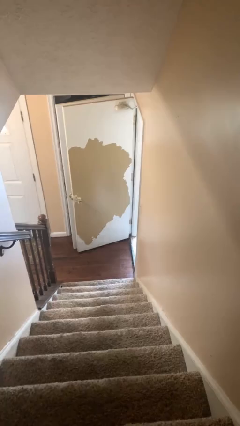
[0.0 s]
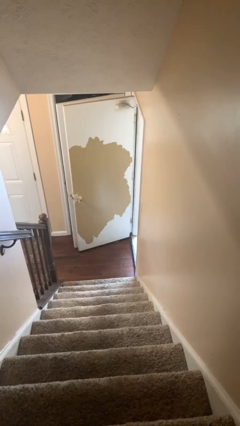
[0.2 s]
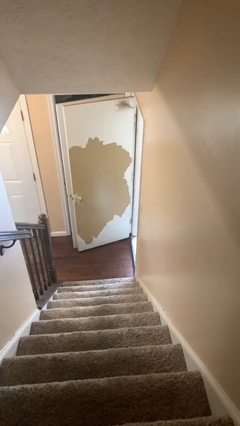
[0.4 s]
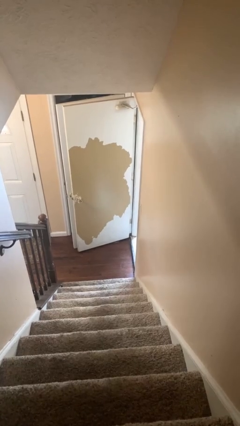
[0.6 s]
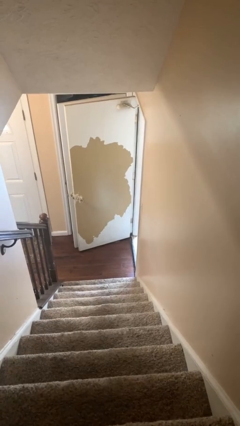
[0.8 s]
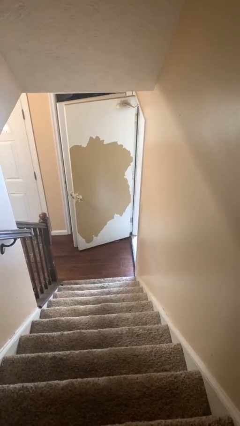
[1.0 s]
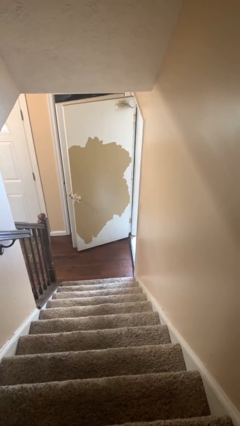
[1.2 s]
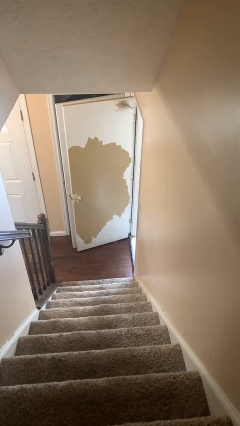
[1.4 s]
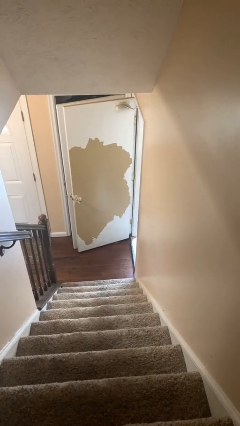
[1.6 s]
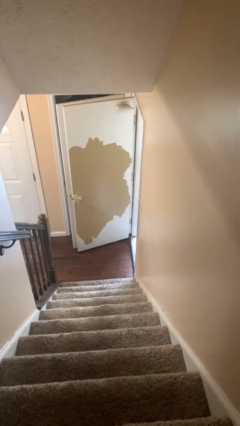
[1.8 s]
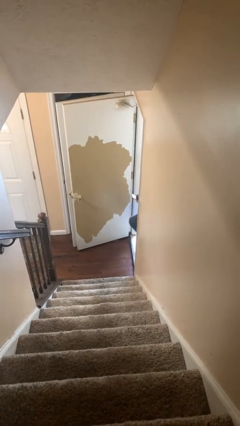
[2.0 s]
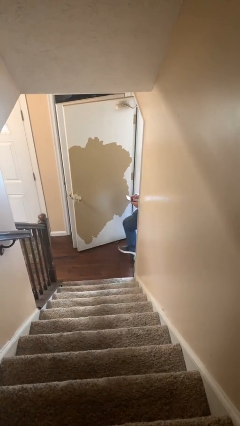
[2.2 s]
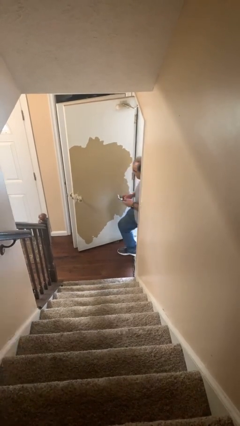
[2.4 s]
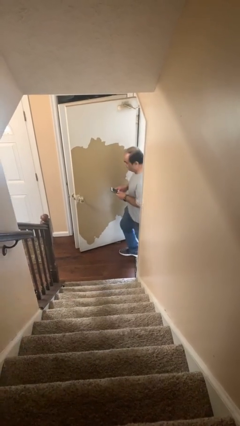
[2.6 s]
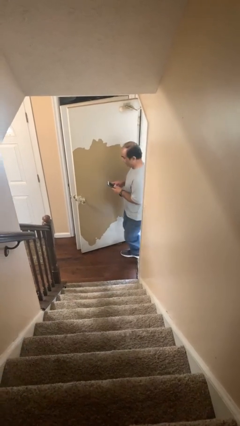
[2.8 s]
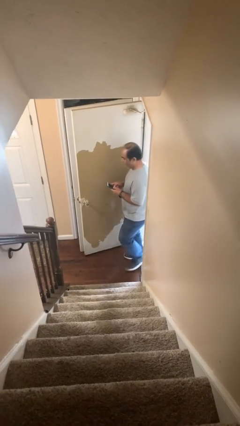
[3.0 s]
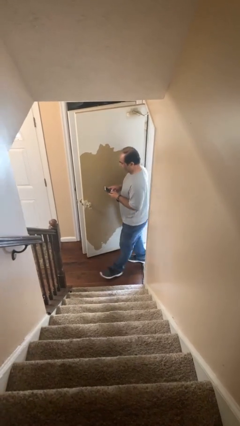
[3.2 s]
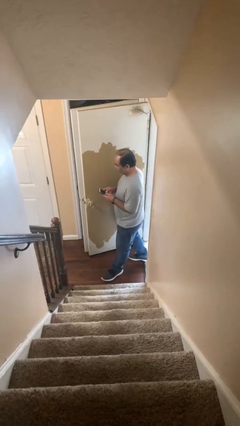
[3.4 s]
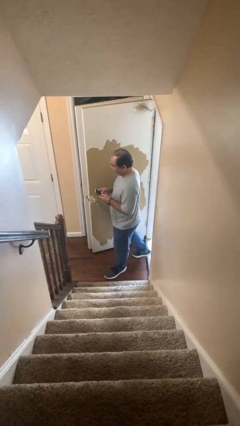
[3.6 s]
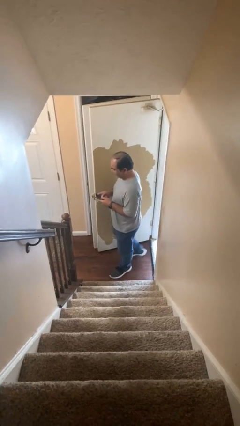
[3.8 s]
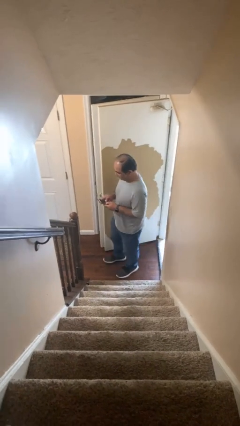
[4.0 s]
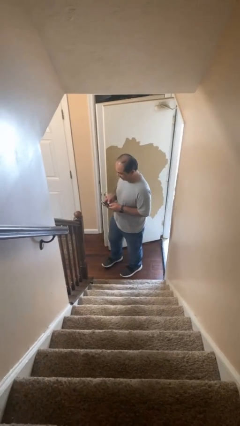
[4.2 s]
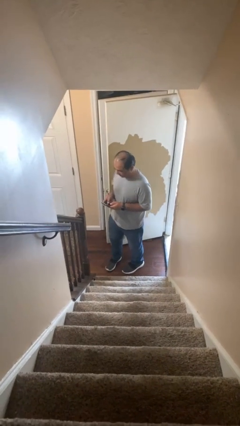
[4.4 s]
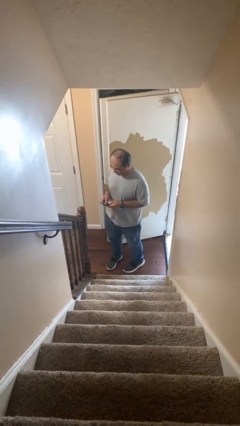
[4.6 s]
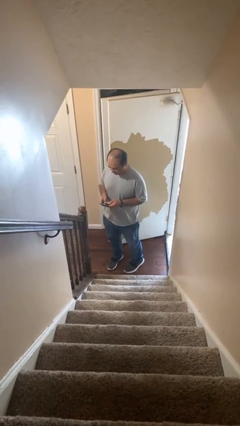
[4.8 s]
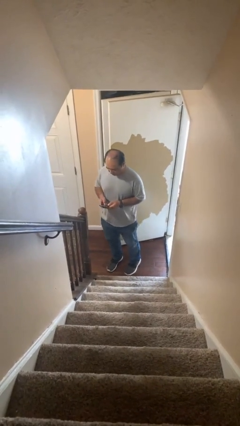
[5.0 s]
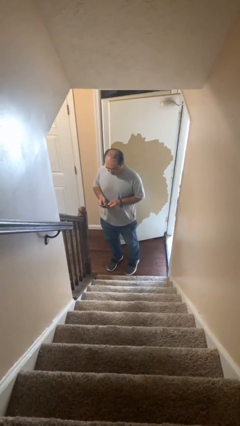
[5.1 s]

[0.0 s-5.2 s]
person enters scene through structure

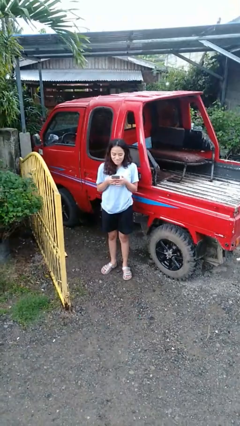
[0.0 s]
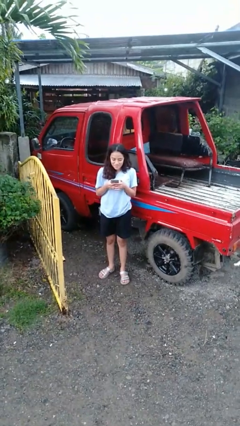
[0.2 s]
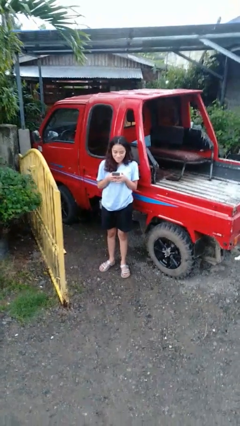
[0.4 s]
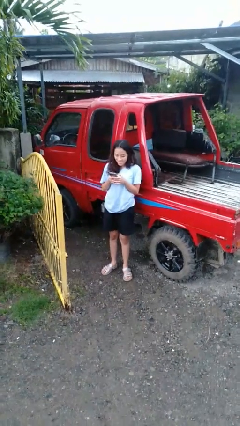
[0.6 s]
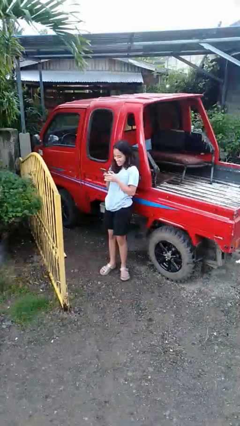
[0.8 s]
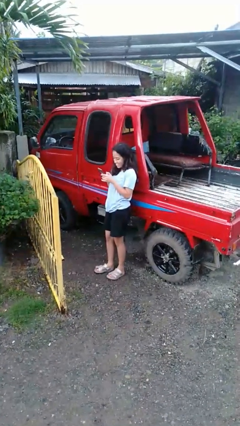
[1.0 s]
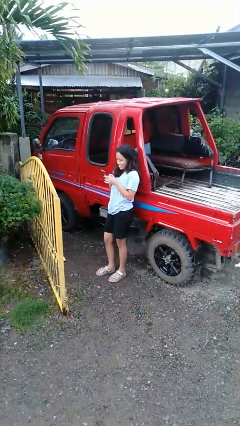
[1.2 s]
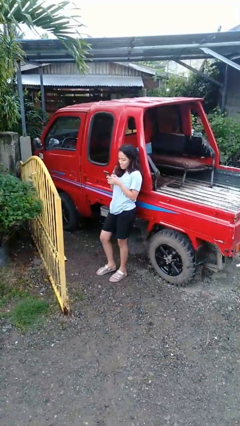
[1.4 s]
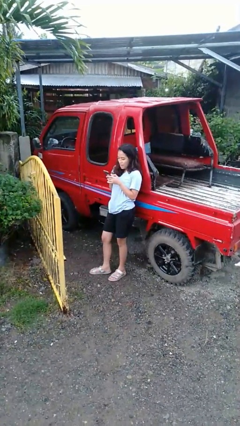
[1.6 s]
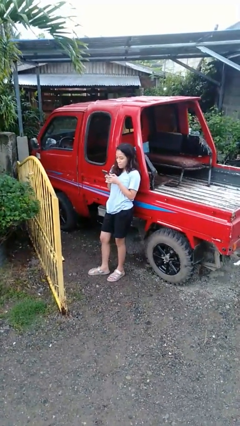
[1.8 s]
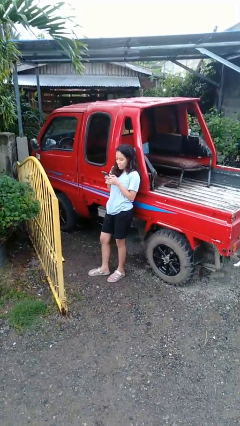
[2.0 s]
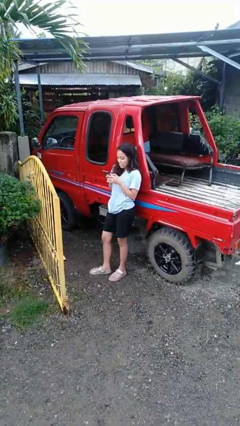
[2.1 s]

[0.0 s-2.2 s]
person leans against car

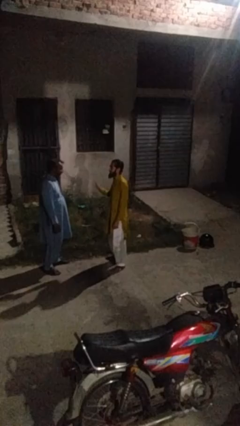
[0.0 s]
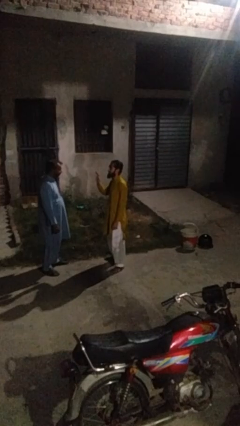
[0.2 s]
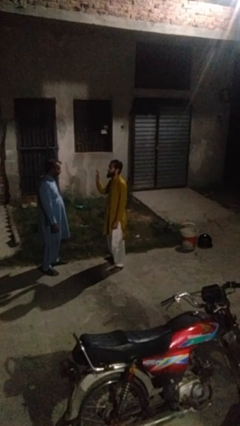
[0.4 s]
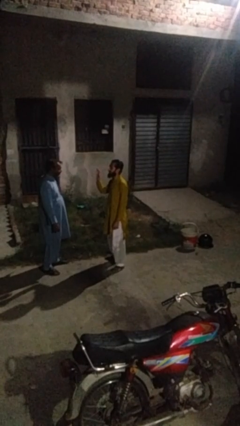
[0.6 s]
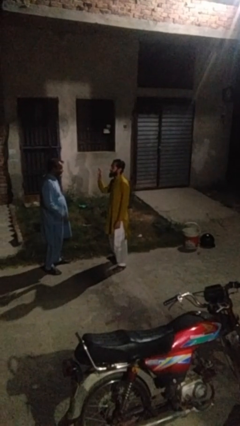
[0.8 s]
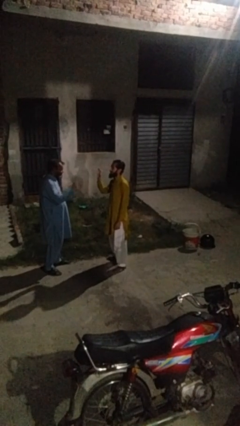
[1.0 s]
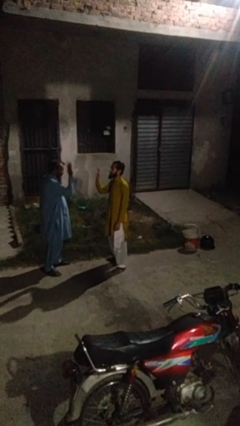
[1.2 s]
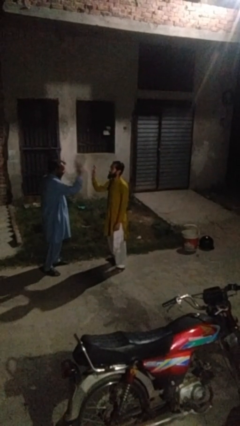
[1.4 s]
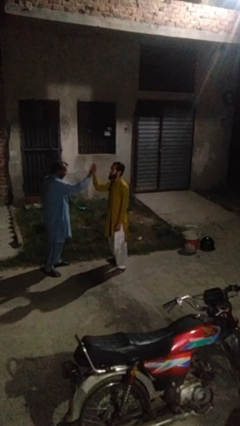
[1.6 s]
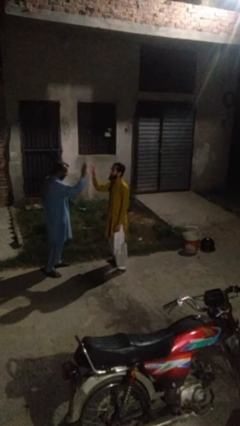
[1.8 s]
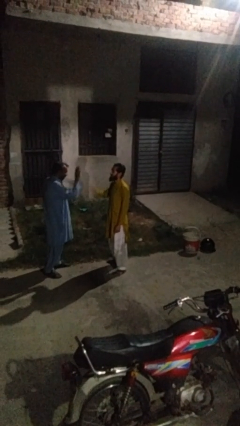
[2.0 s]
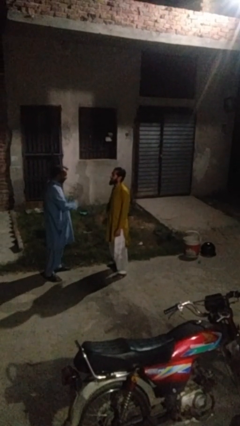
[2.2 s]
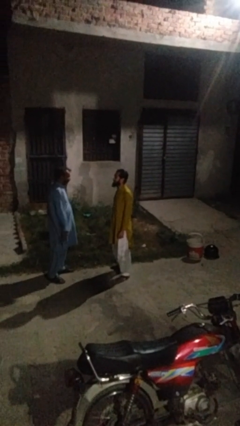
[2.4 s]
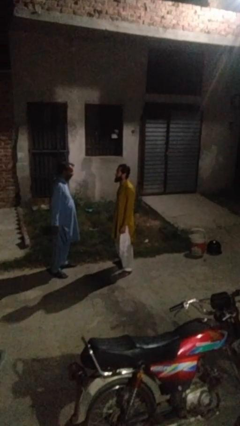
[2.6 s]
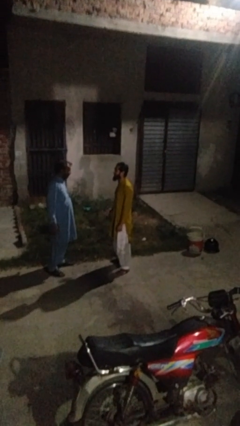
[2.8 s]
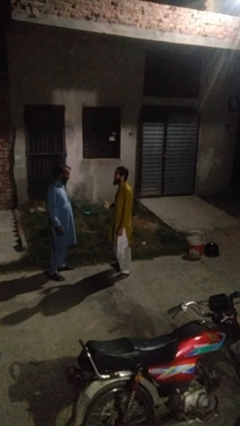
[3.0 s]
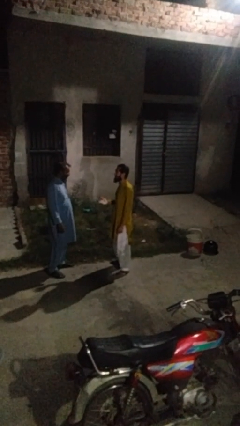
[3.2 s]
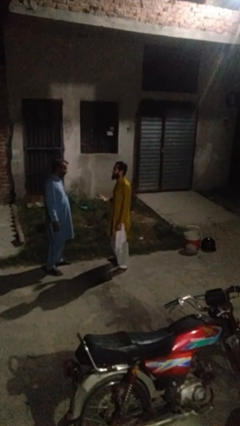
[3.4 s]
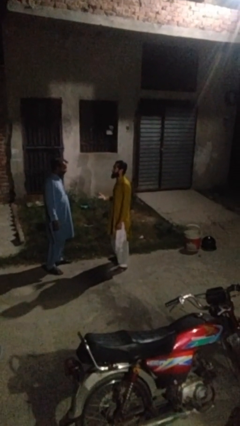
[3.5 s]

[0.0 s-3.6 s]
person highfives hand

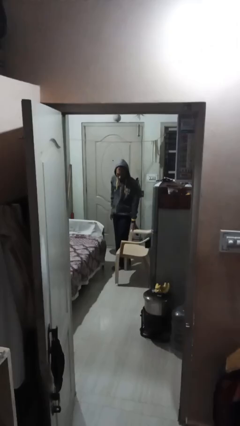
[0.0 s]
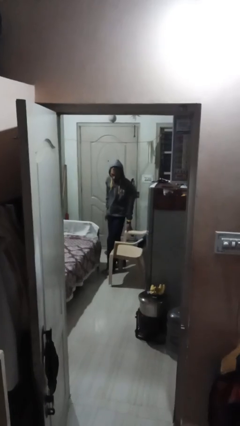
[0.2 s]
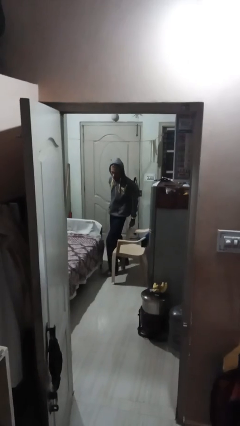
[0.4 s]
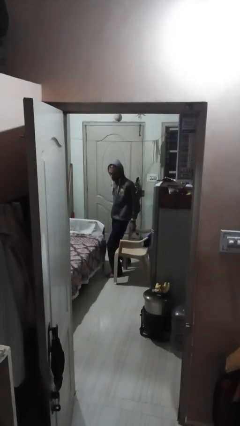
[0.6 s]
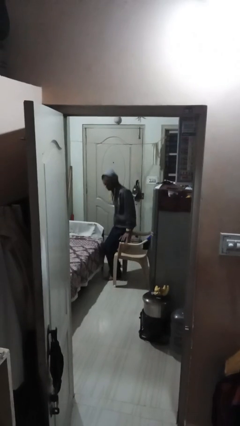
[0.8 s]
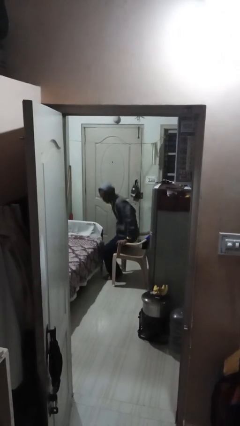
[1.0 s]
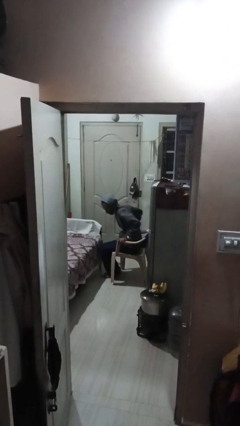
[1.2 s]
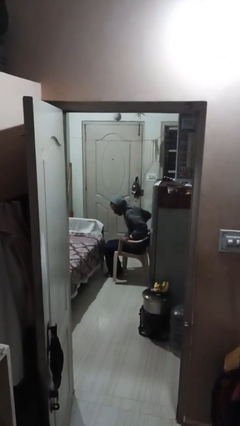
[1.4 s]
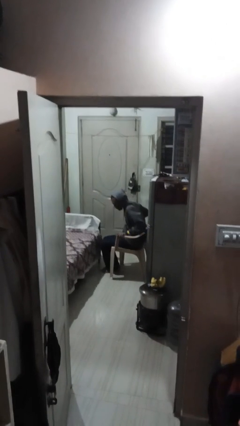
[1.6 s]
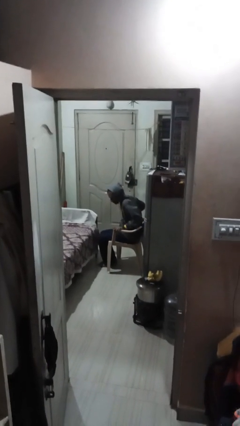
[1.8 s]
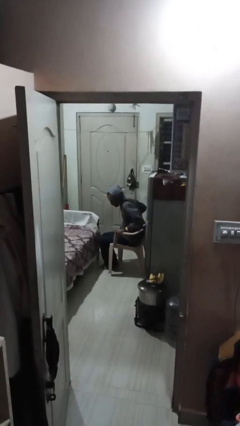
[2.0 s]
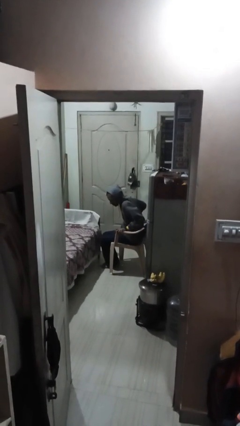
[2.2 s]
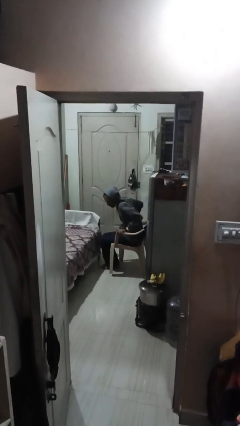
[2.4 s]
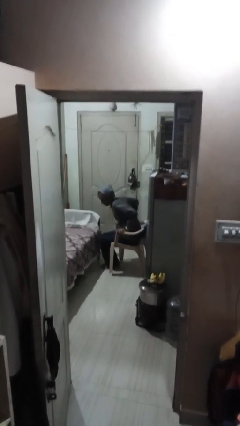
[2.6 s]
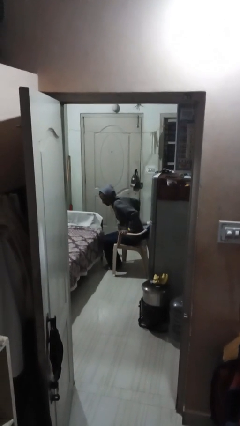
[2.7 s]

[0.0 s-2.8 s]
person sits down

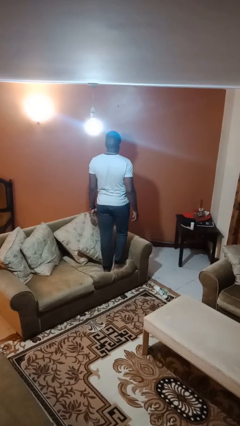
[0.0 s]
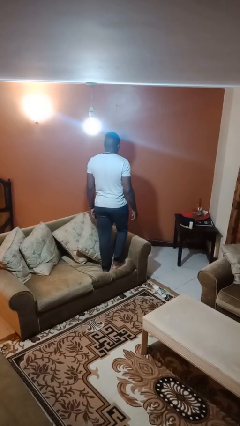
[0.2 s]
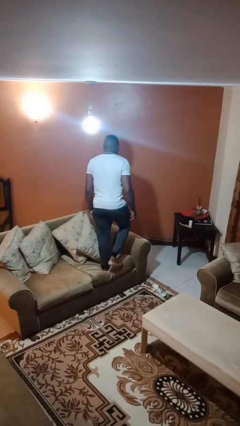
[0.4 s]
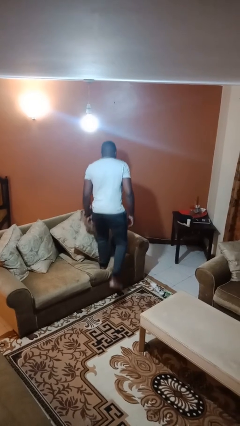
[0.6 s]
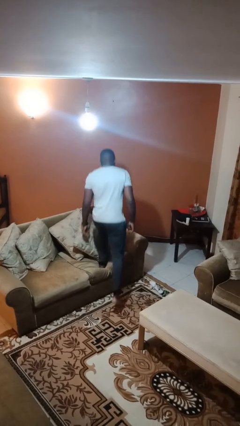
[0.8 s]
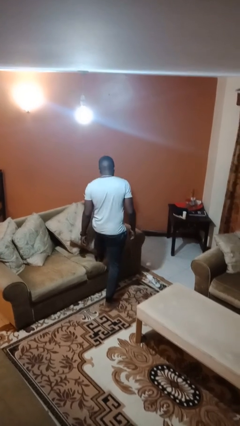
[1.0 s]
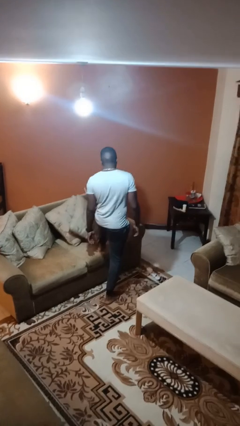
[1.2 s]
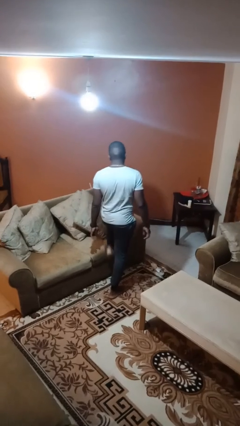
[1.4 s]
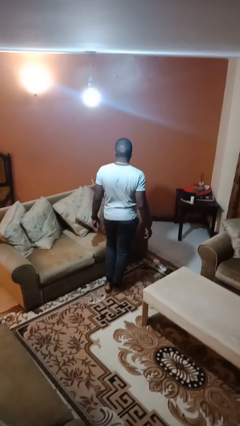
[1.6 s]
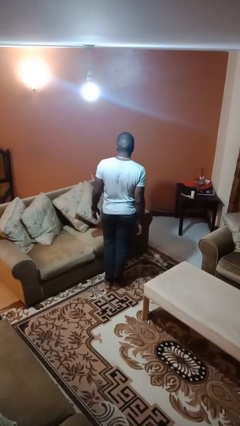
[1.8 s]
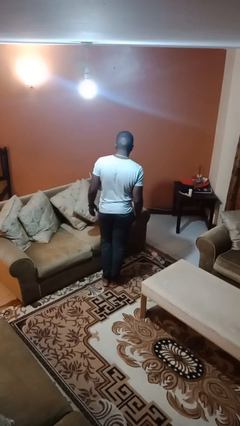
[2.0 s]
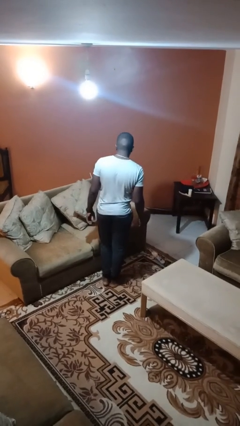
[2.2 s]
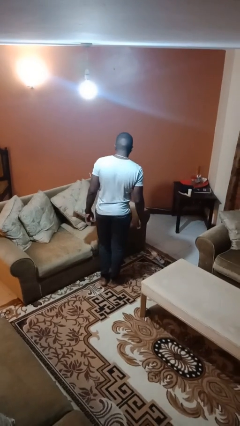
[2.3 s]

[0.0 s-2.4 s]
person climbs off couch

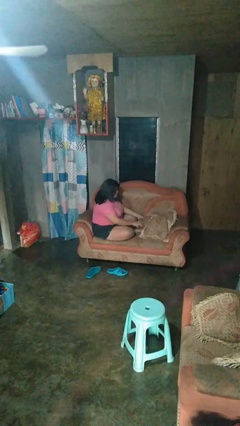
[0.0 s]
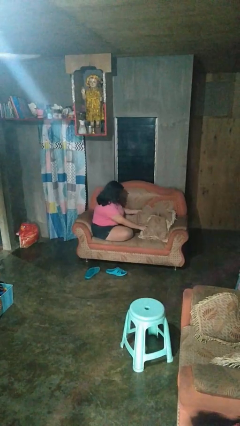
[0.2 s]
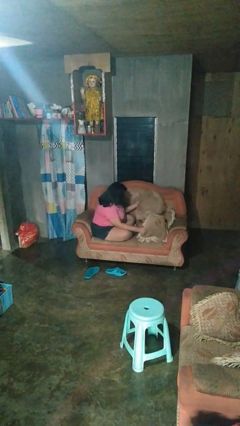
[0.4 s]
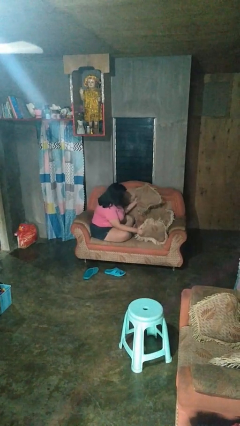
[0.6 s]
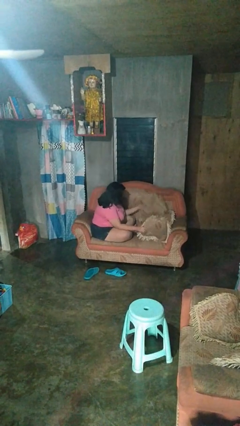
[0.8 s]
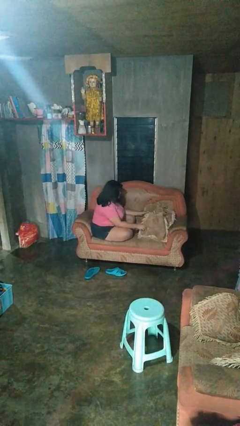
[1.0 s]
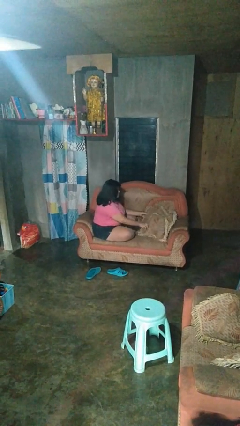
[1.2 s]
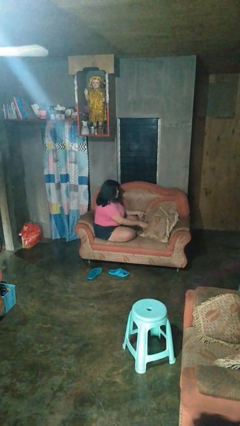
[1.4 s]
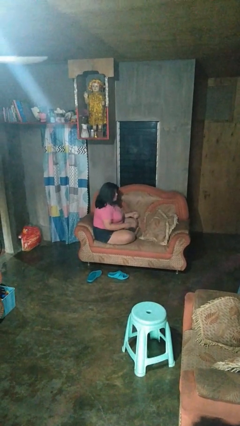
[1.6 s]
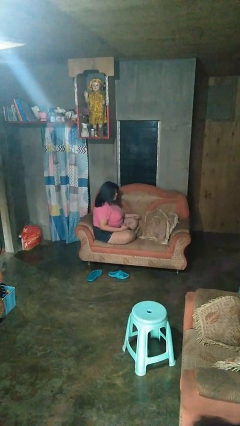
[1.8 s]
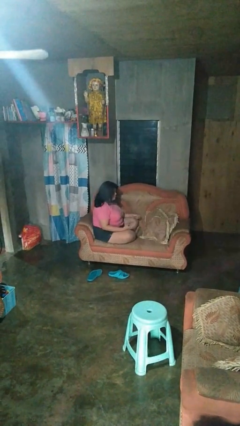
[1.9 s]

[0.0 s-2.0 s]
person searches in couch
